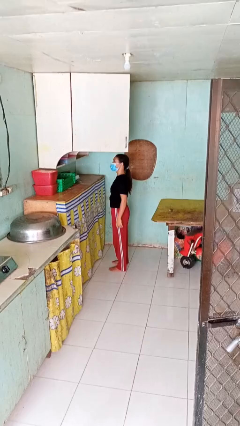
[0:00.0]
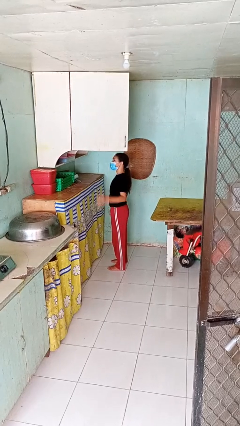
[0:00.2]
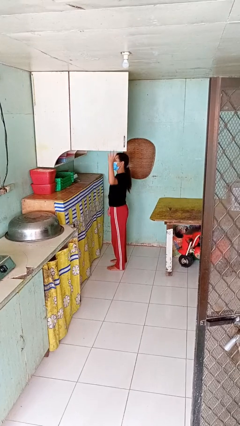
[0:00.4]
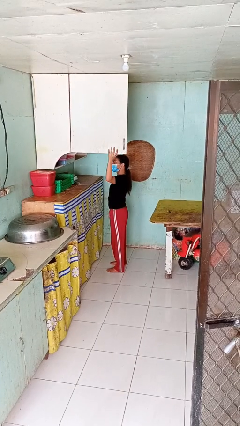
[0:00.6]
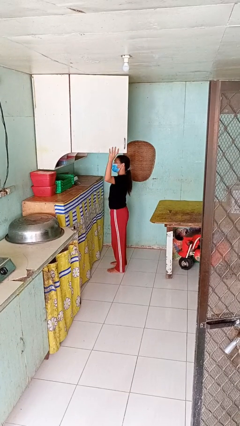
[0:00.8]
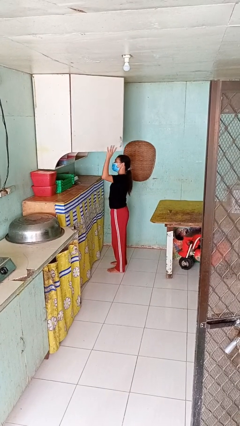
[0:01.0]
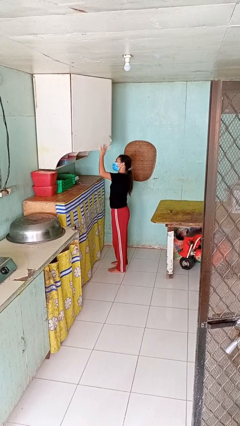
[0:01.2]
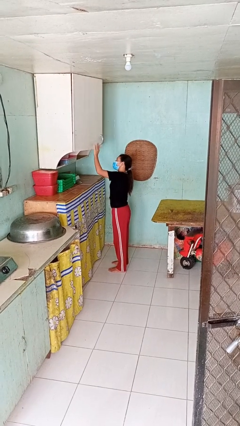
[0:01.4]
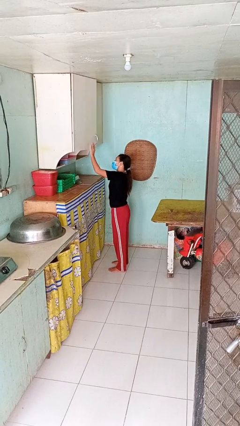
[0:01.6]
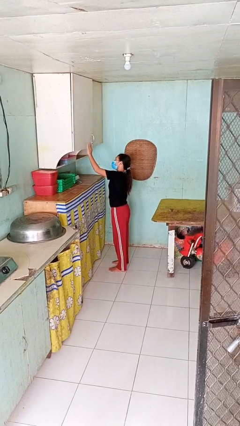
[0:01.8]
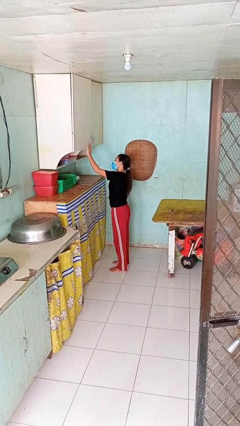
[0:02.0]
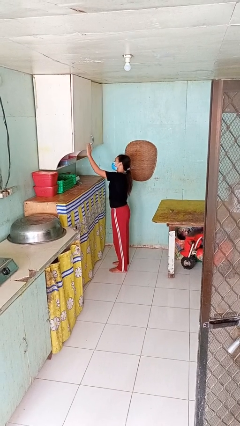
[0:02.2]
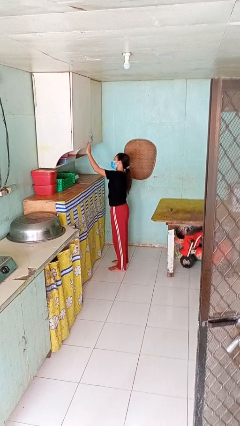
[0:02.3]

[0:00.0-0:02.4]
person closes cabinet

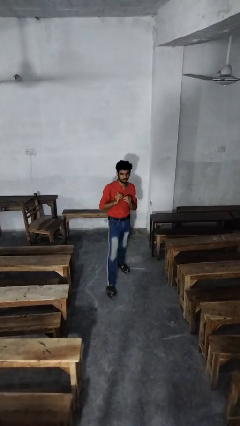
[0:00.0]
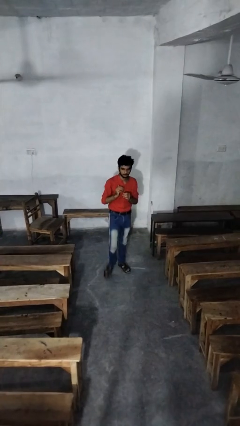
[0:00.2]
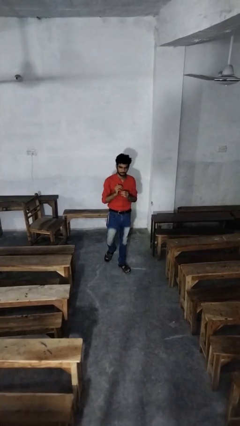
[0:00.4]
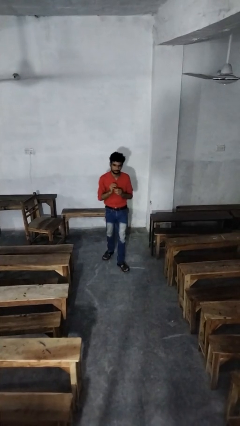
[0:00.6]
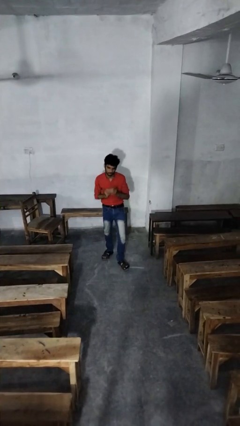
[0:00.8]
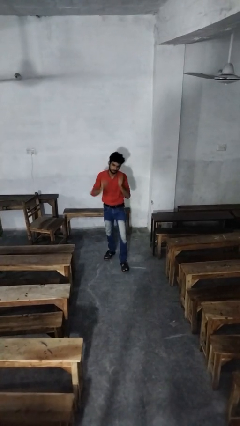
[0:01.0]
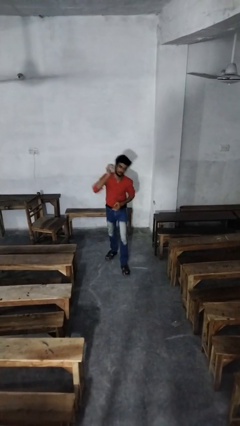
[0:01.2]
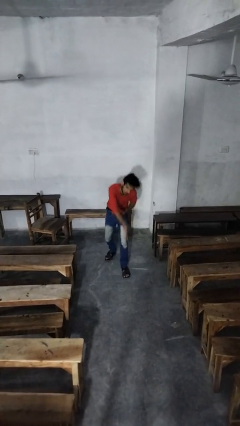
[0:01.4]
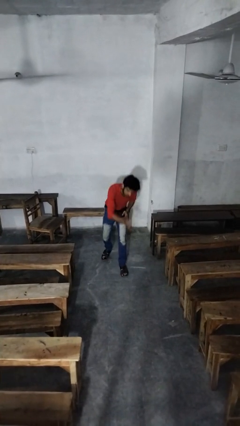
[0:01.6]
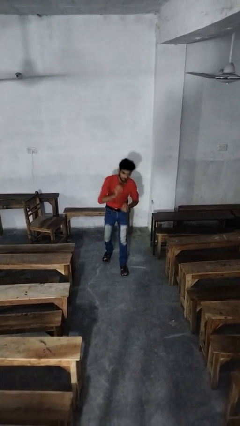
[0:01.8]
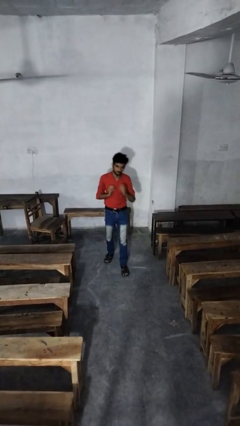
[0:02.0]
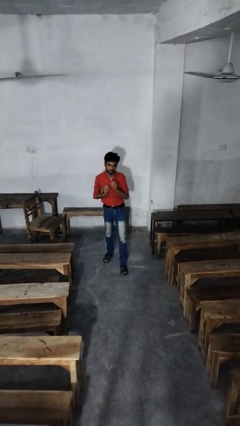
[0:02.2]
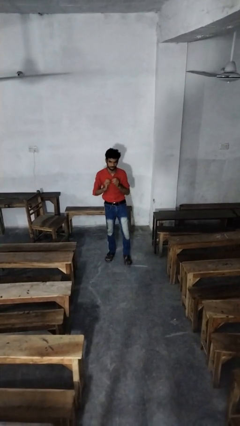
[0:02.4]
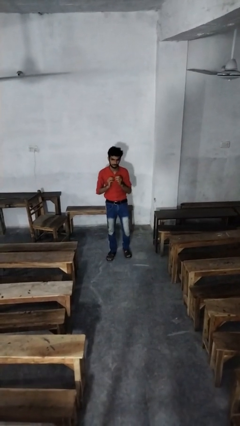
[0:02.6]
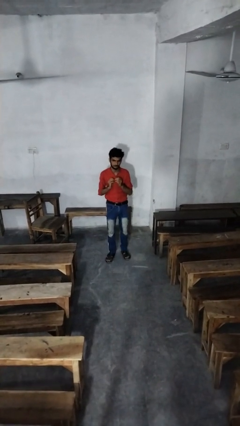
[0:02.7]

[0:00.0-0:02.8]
person karate chop

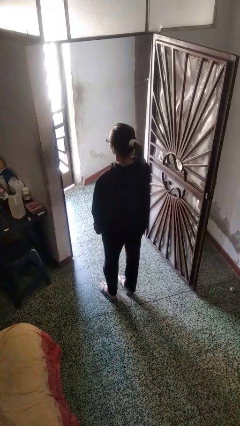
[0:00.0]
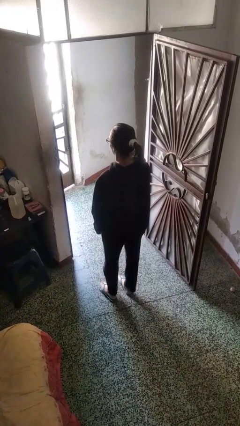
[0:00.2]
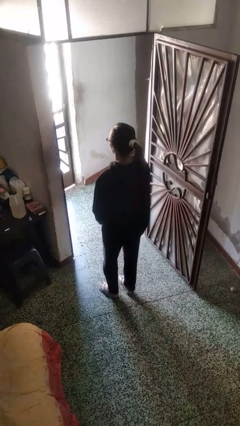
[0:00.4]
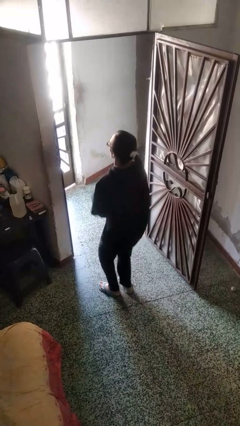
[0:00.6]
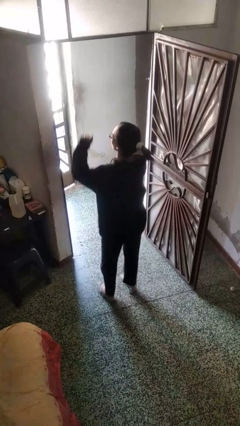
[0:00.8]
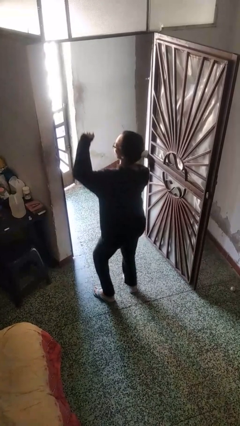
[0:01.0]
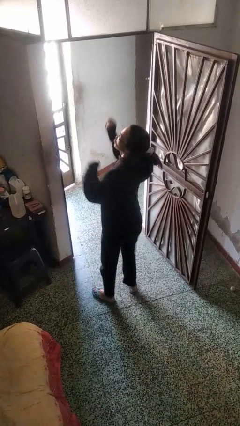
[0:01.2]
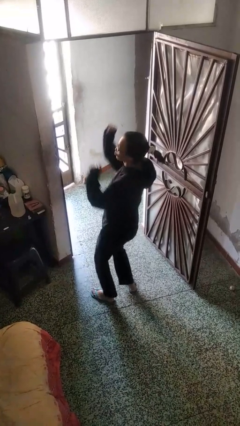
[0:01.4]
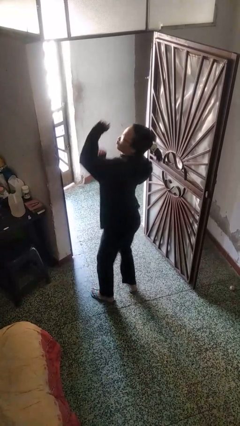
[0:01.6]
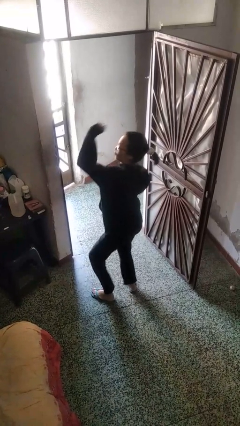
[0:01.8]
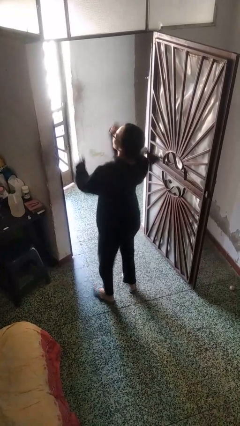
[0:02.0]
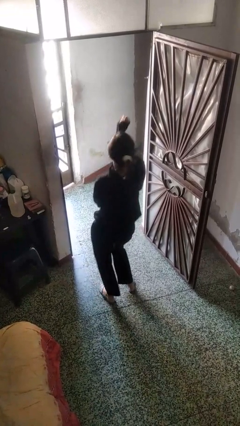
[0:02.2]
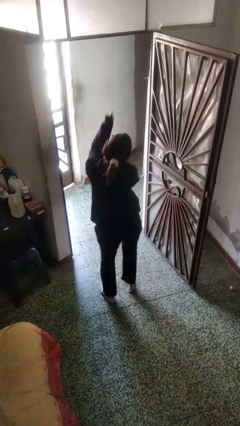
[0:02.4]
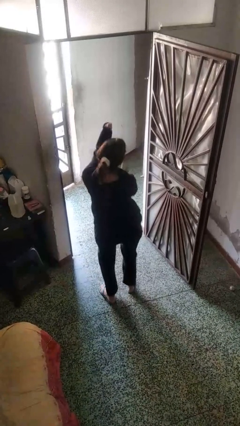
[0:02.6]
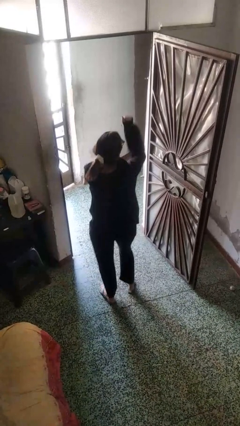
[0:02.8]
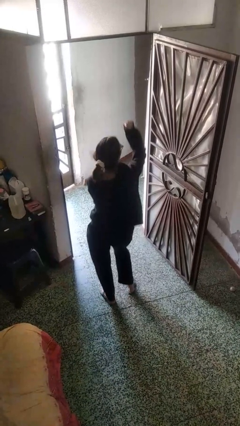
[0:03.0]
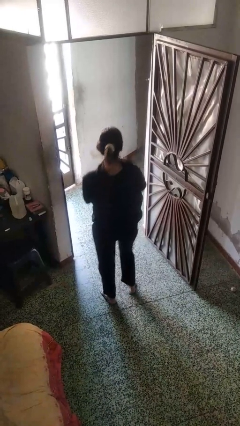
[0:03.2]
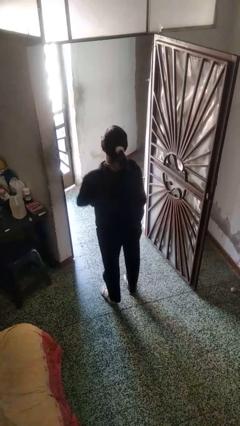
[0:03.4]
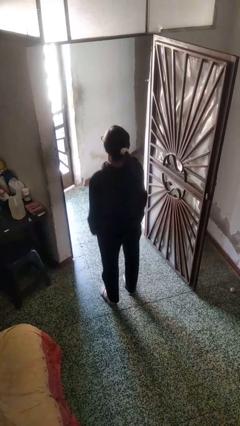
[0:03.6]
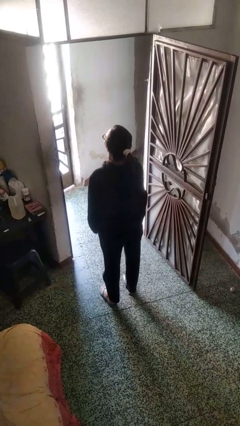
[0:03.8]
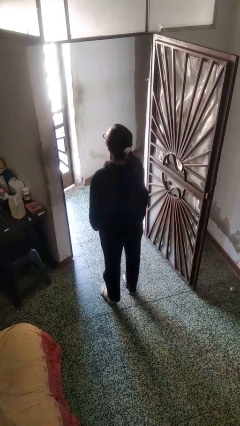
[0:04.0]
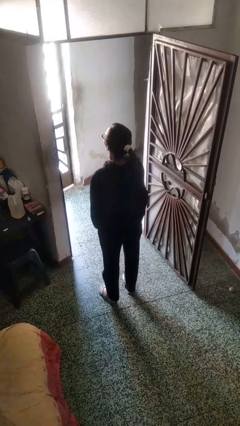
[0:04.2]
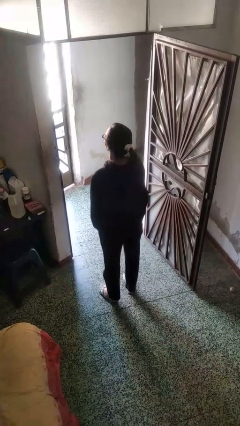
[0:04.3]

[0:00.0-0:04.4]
person dances in place

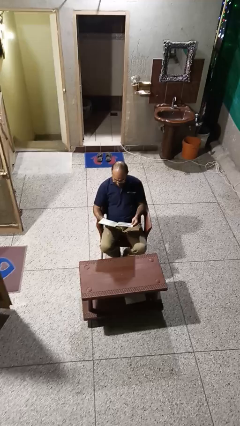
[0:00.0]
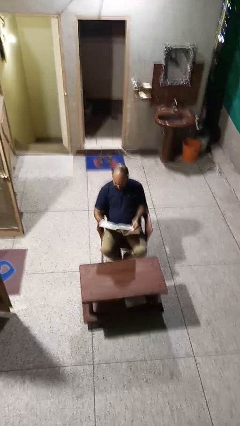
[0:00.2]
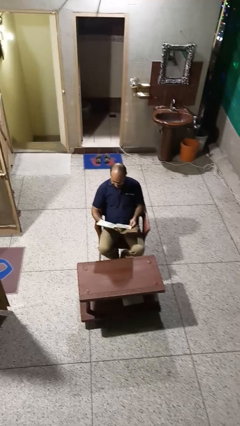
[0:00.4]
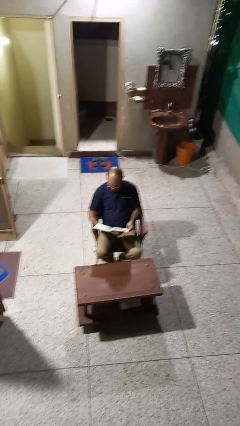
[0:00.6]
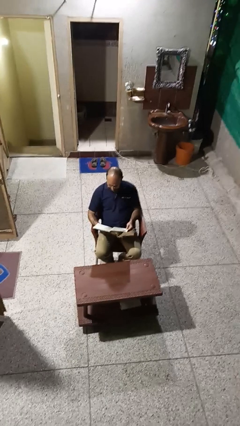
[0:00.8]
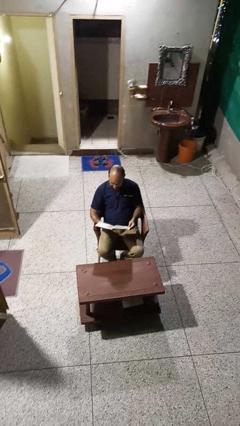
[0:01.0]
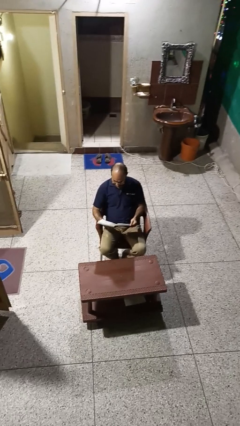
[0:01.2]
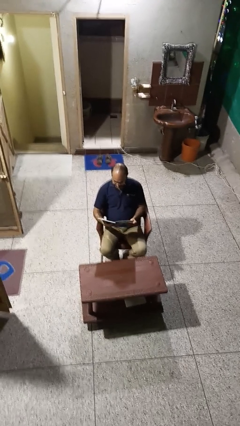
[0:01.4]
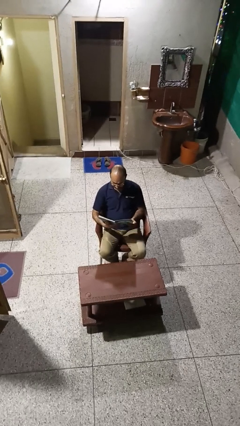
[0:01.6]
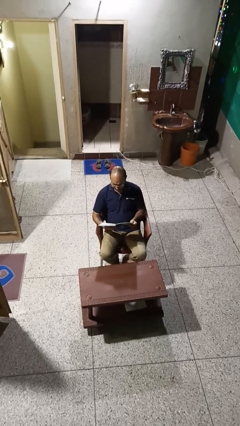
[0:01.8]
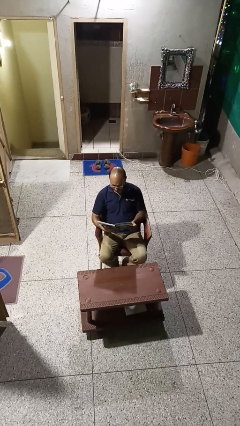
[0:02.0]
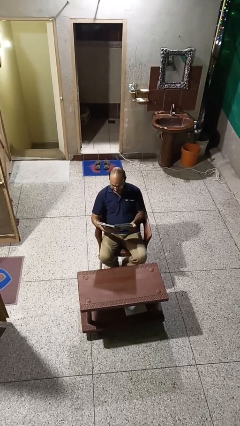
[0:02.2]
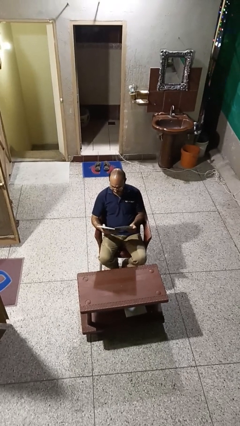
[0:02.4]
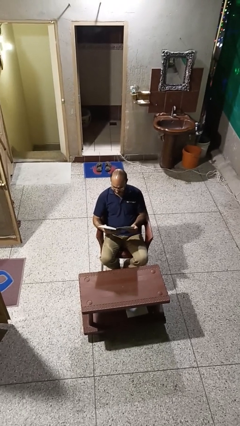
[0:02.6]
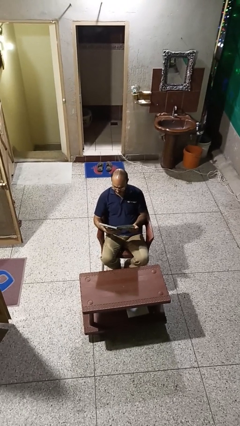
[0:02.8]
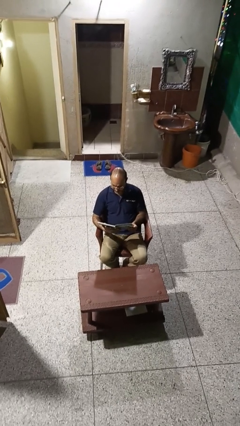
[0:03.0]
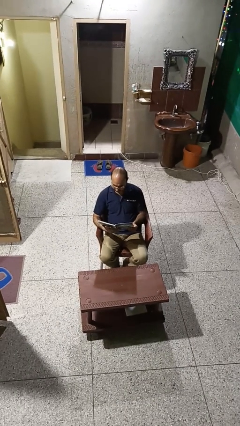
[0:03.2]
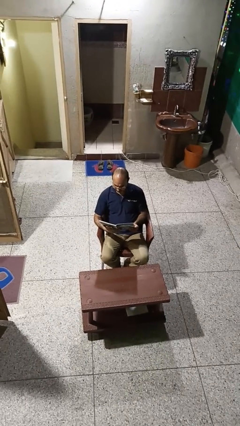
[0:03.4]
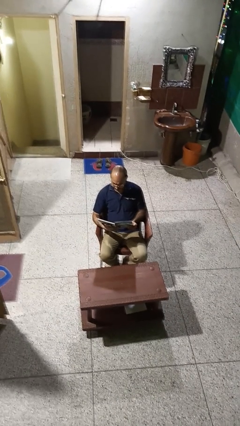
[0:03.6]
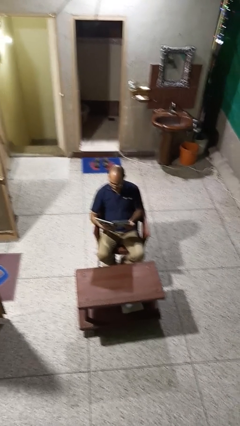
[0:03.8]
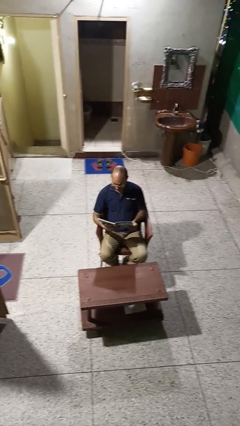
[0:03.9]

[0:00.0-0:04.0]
person reads book

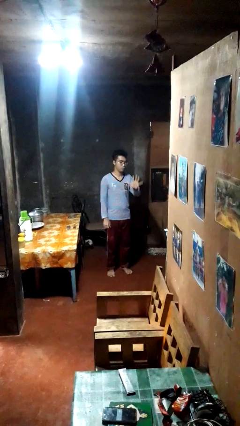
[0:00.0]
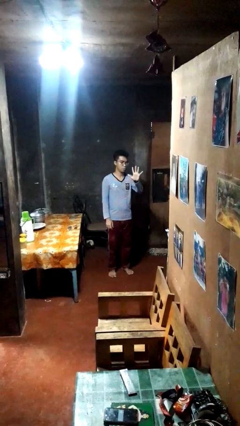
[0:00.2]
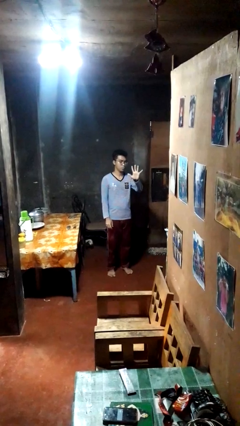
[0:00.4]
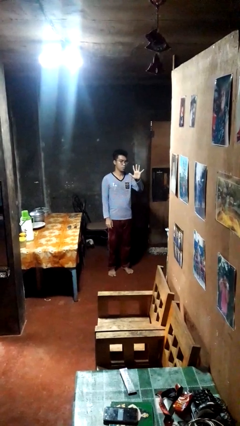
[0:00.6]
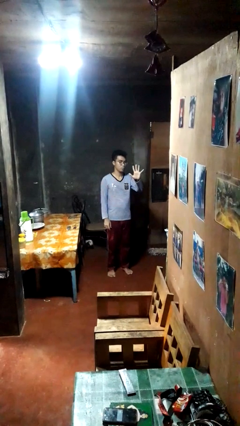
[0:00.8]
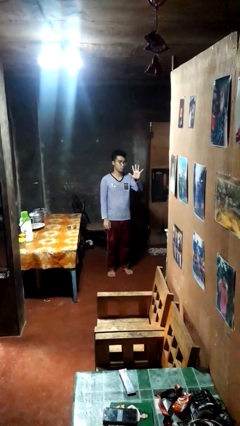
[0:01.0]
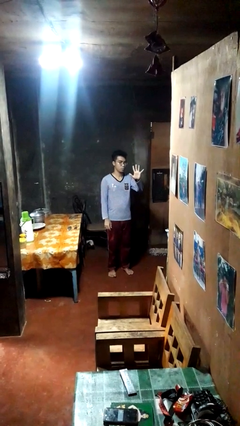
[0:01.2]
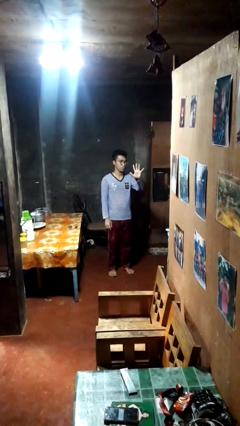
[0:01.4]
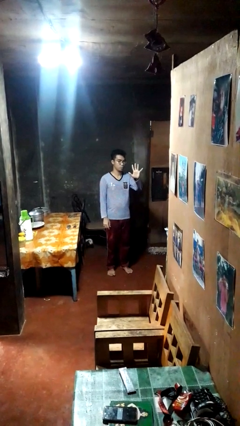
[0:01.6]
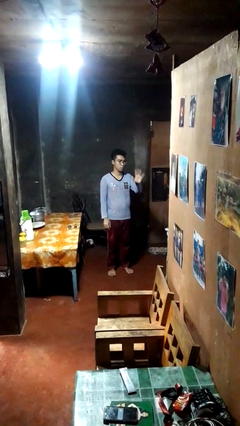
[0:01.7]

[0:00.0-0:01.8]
person gestures number five

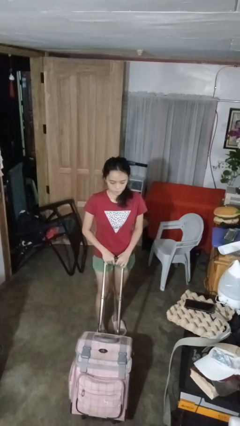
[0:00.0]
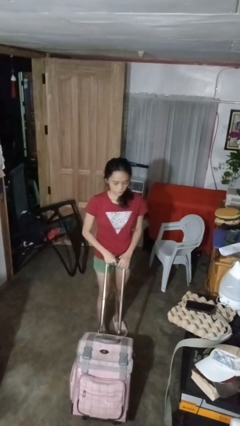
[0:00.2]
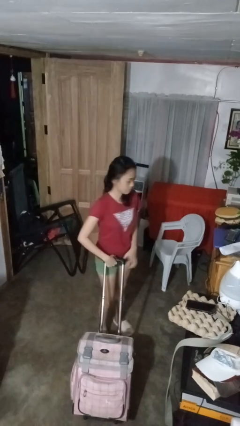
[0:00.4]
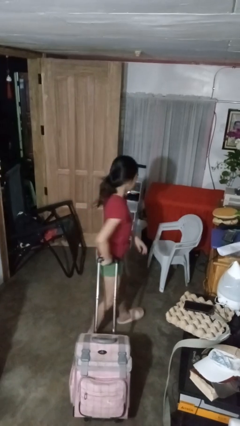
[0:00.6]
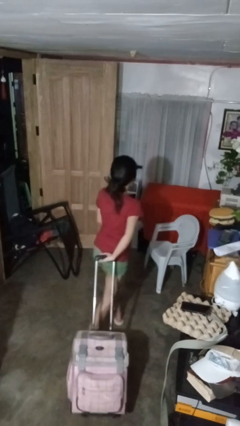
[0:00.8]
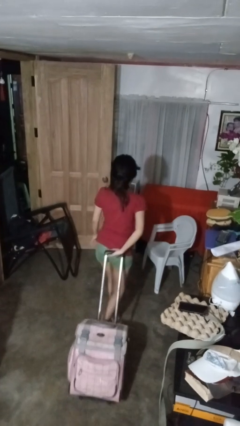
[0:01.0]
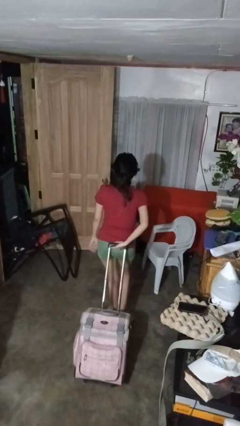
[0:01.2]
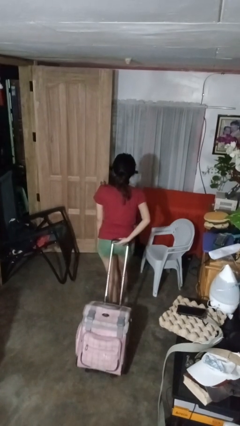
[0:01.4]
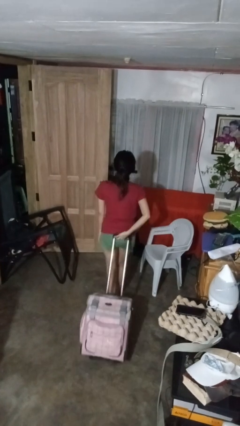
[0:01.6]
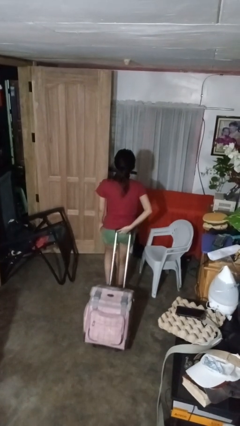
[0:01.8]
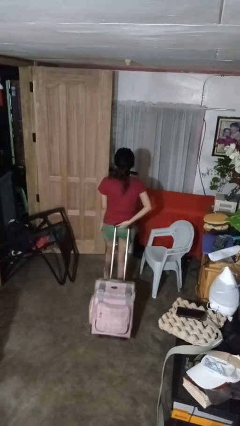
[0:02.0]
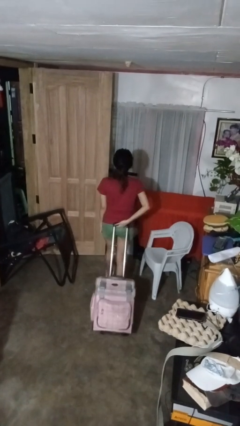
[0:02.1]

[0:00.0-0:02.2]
person pulls wheeled cart
